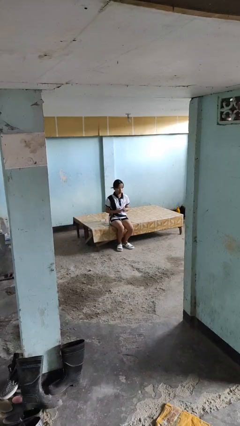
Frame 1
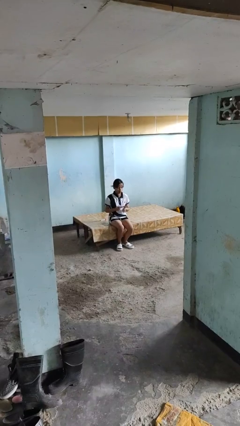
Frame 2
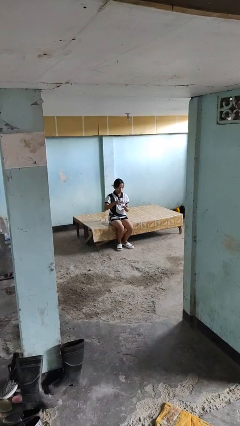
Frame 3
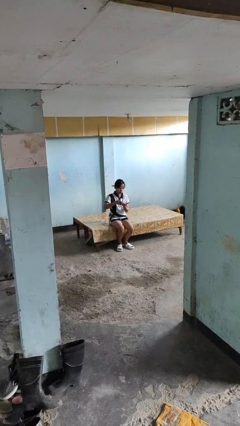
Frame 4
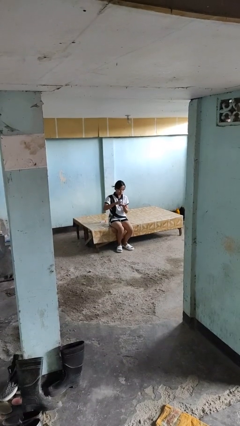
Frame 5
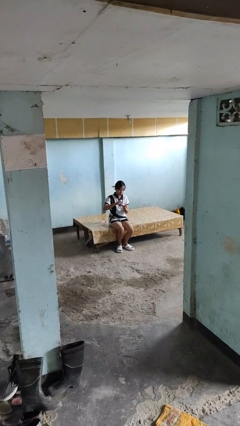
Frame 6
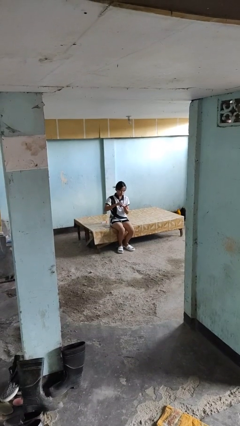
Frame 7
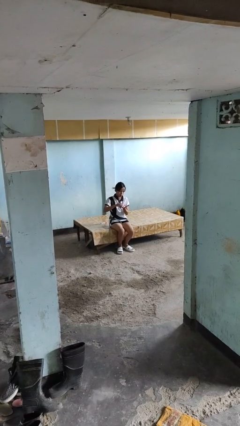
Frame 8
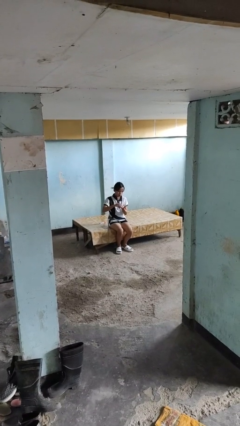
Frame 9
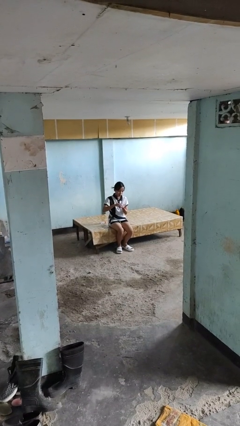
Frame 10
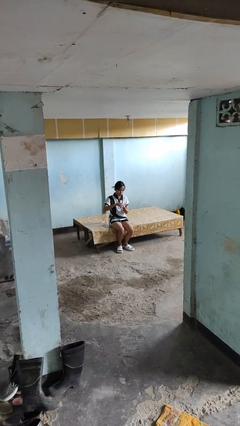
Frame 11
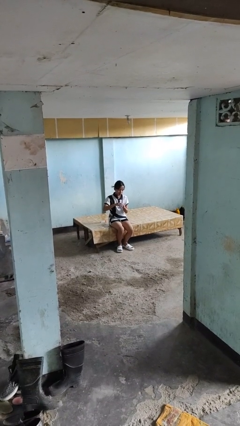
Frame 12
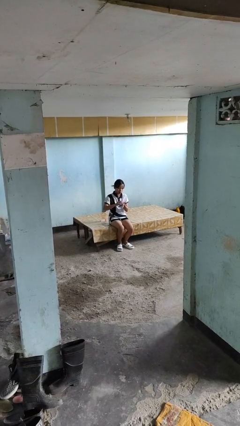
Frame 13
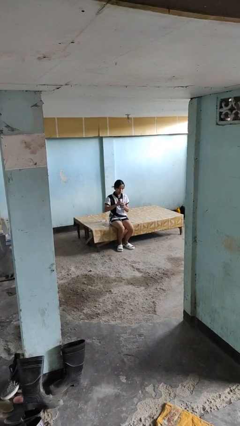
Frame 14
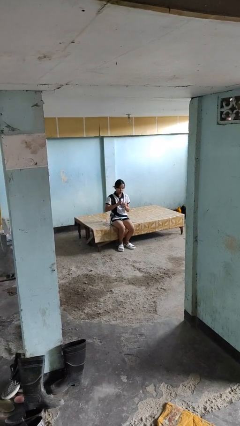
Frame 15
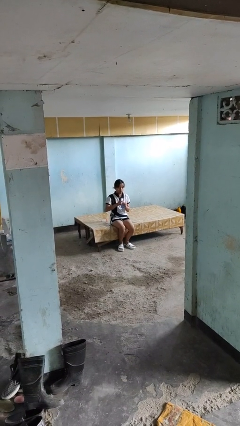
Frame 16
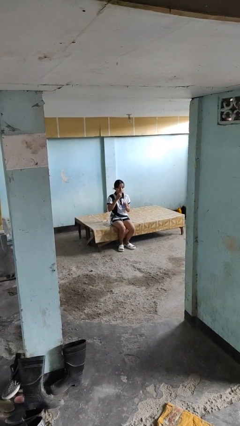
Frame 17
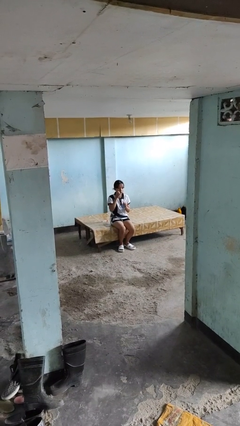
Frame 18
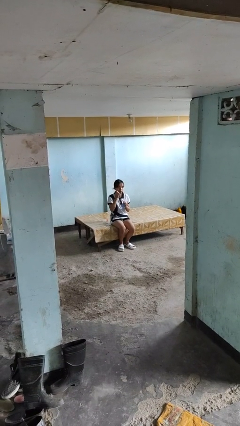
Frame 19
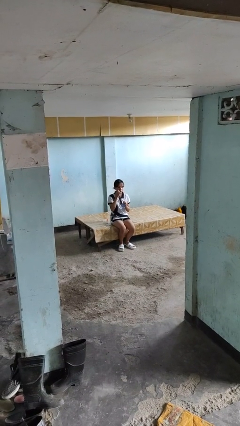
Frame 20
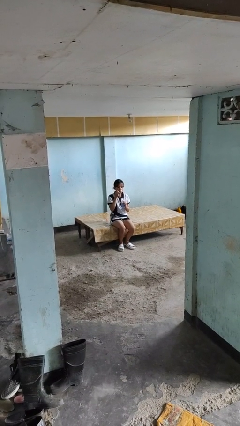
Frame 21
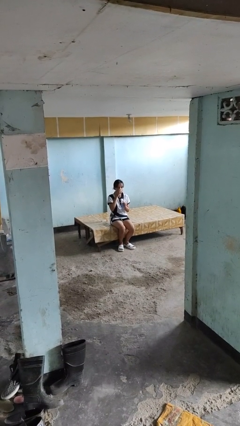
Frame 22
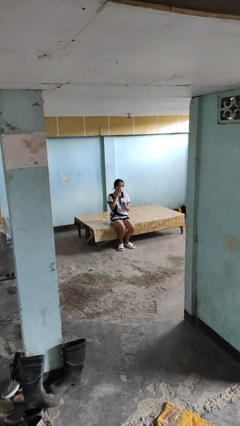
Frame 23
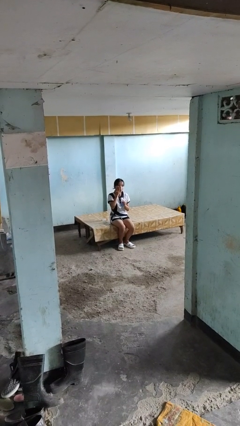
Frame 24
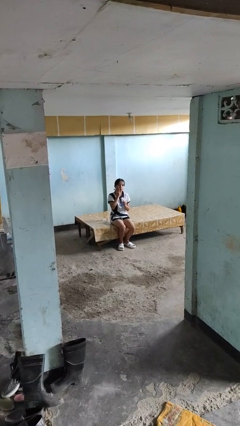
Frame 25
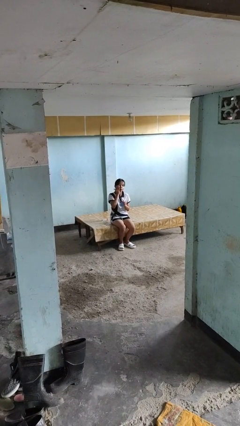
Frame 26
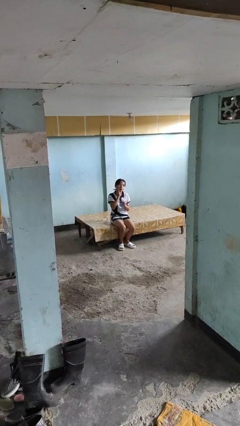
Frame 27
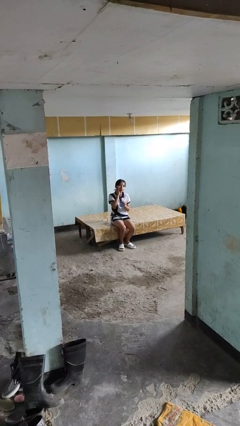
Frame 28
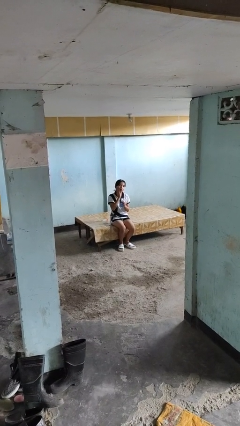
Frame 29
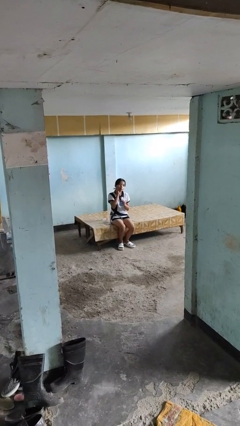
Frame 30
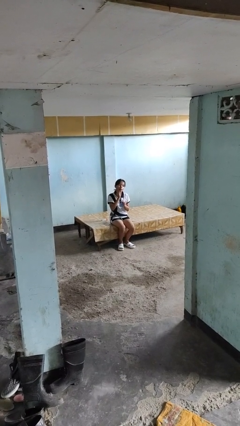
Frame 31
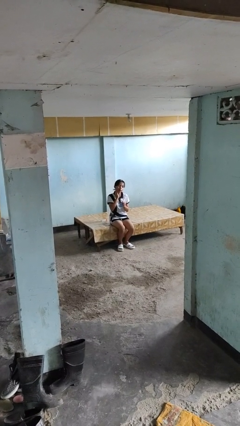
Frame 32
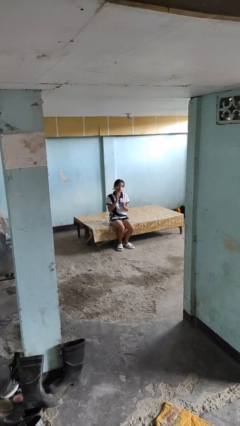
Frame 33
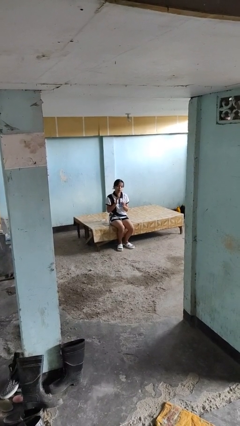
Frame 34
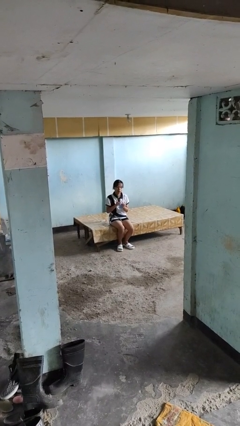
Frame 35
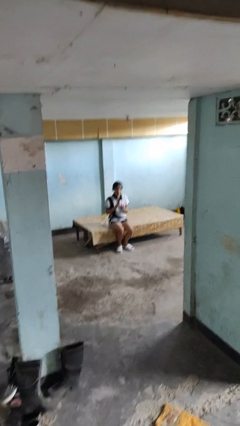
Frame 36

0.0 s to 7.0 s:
person applies facial moisturizer

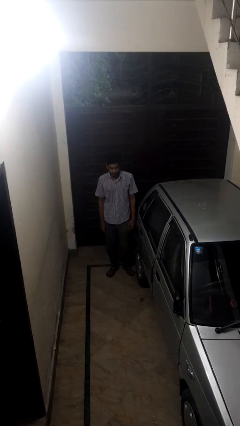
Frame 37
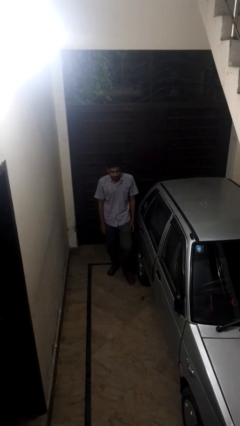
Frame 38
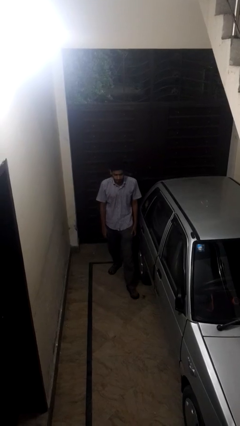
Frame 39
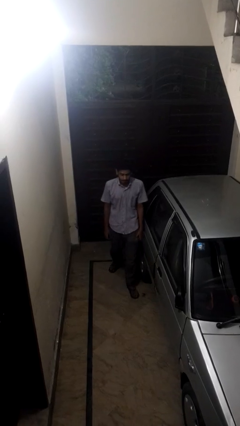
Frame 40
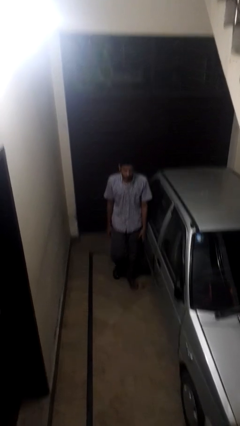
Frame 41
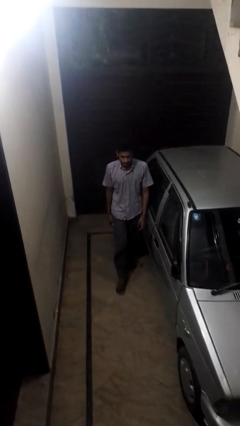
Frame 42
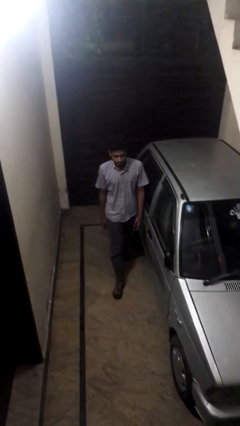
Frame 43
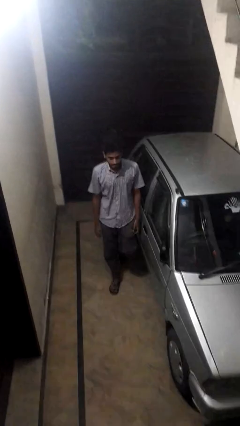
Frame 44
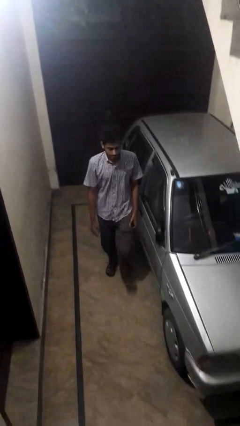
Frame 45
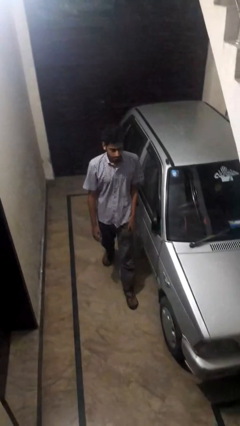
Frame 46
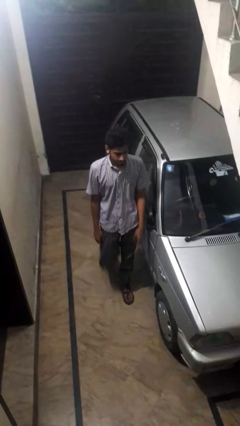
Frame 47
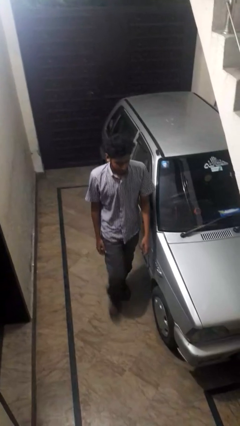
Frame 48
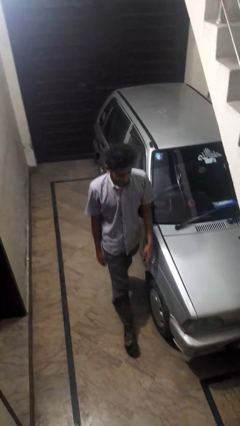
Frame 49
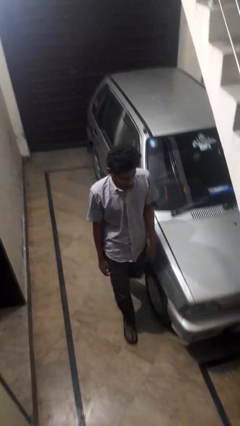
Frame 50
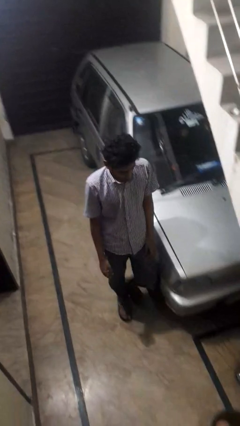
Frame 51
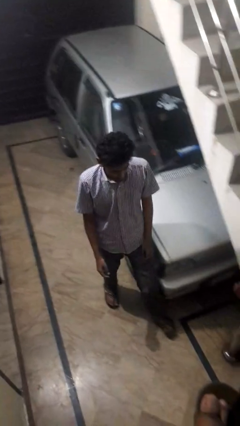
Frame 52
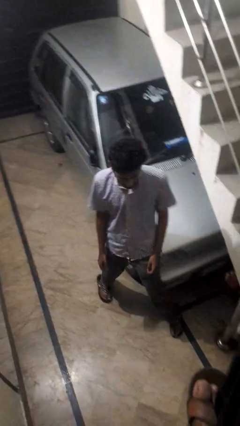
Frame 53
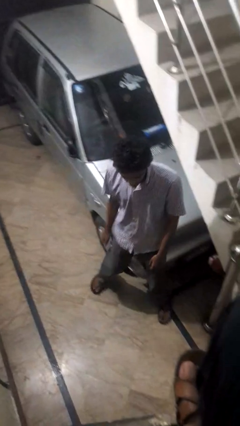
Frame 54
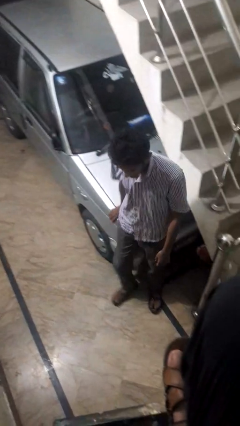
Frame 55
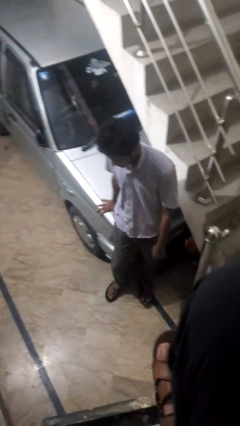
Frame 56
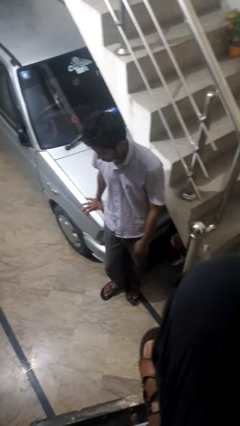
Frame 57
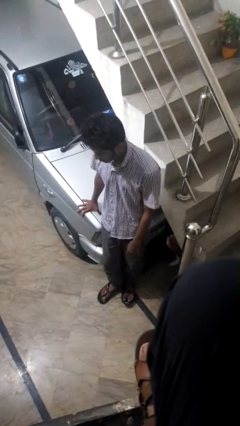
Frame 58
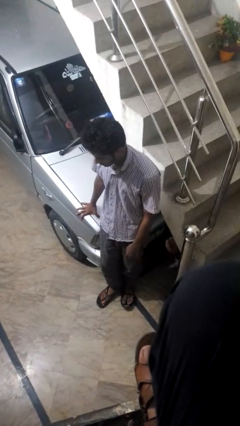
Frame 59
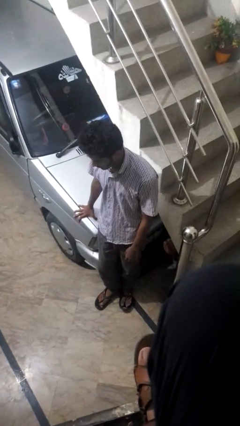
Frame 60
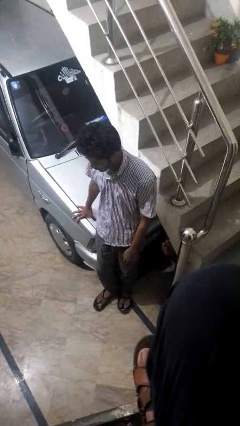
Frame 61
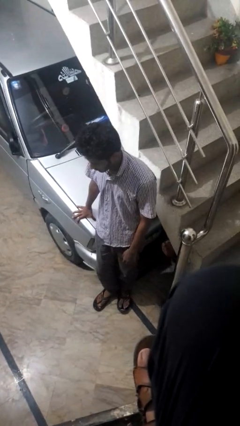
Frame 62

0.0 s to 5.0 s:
person walks around car

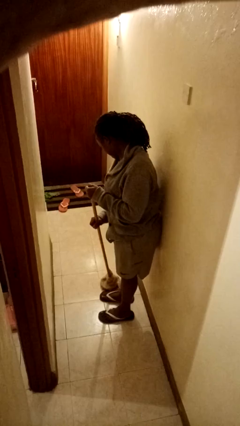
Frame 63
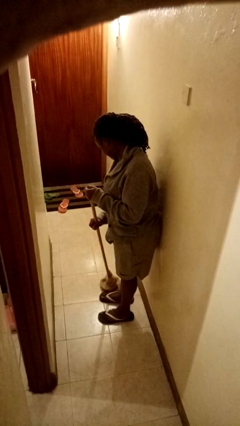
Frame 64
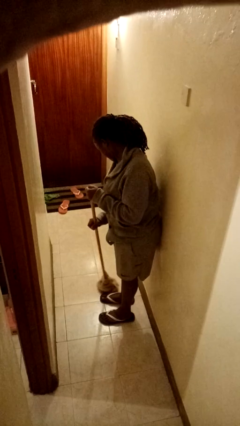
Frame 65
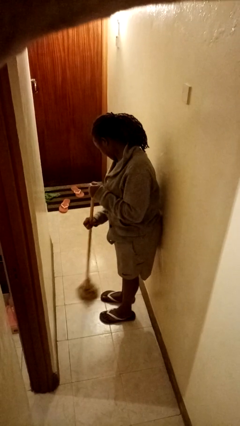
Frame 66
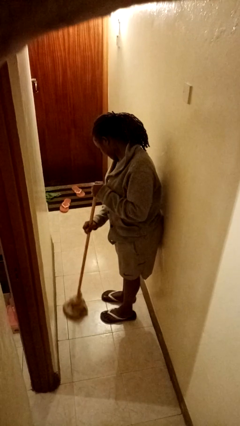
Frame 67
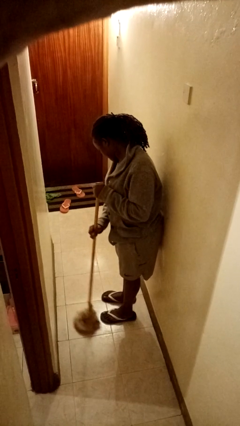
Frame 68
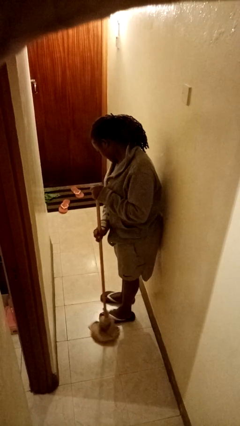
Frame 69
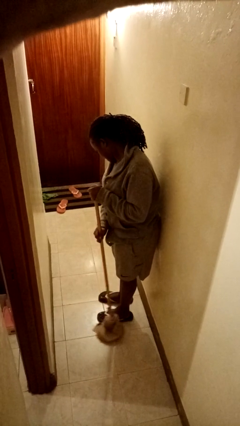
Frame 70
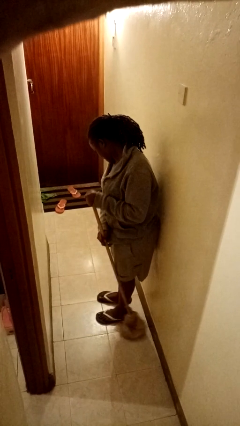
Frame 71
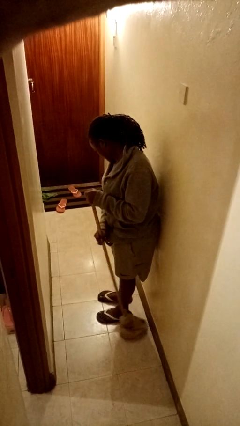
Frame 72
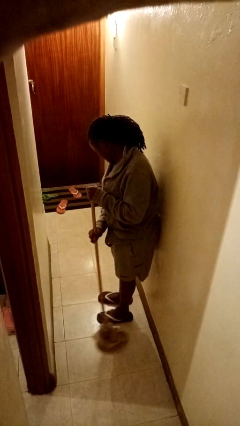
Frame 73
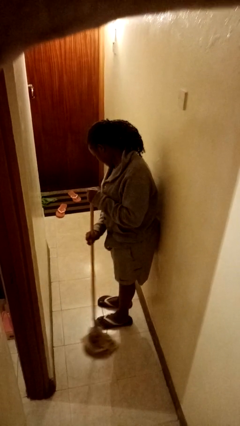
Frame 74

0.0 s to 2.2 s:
person mops

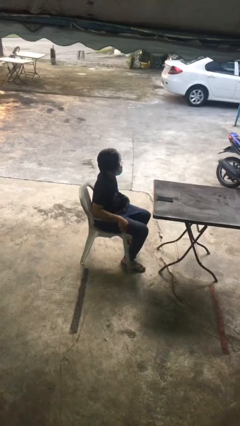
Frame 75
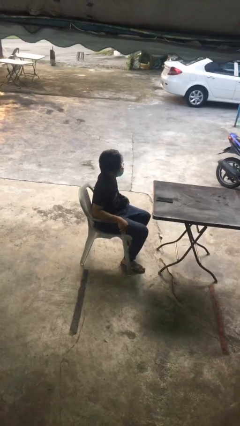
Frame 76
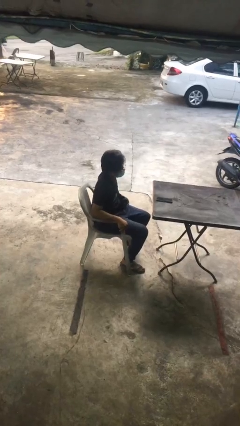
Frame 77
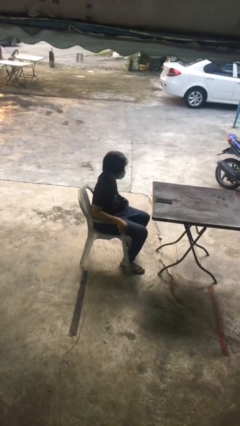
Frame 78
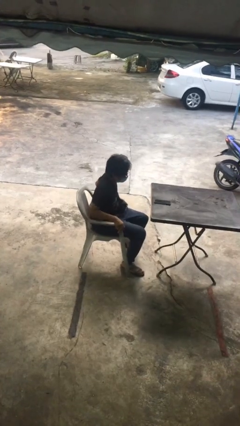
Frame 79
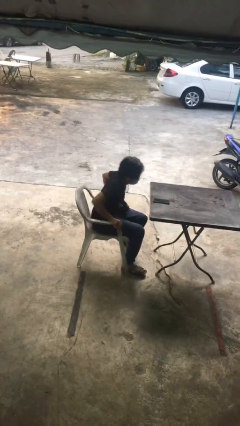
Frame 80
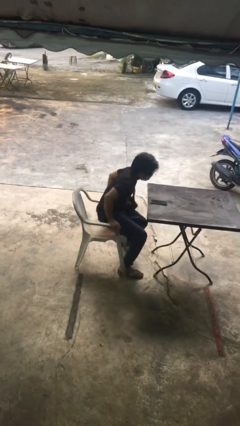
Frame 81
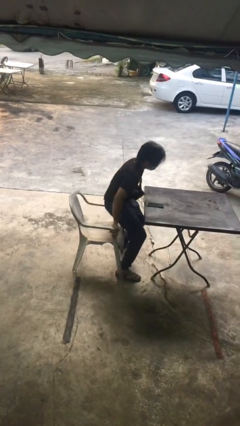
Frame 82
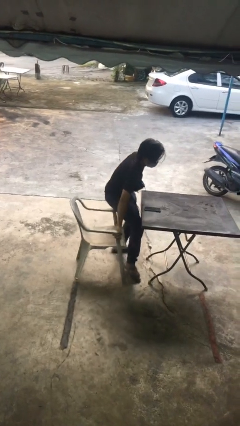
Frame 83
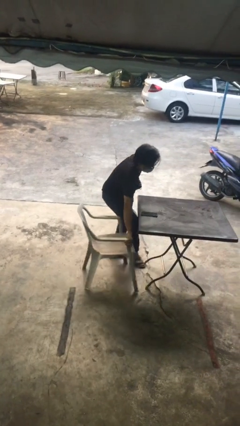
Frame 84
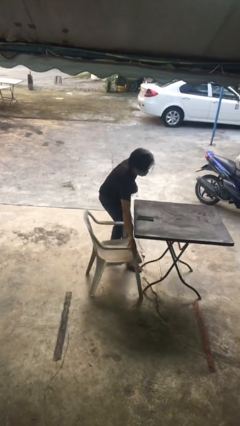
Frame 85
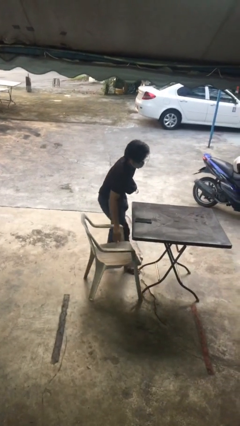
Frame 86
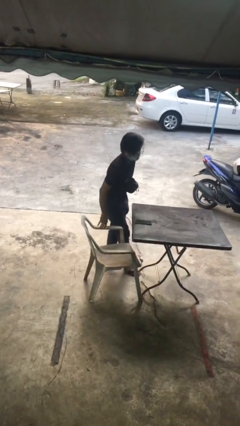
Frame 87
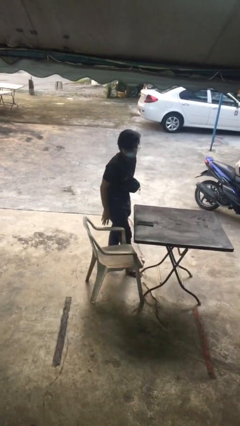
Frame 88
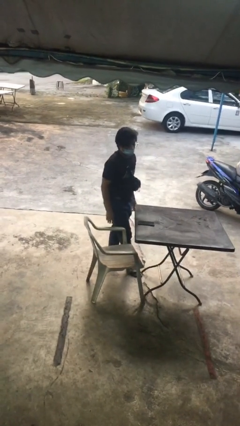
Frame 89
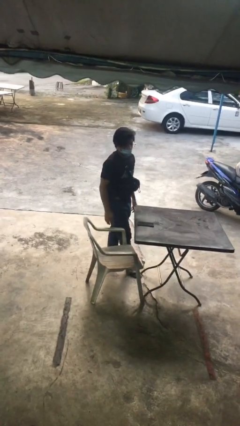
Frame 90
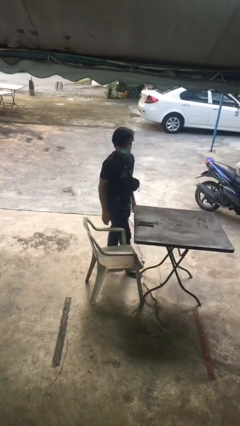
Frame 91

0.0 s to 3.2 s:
person stands up

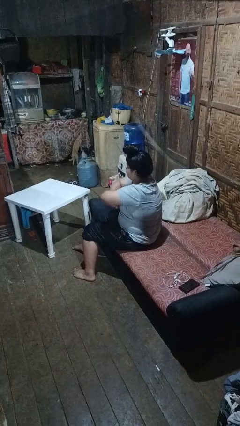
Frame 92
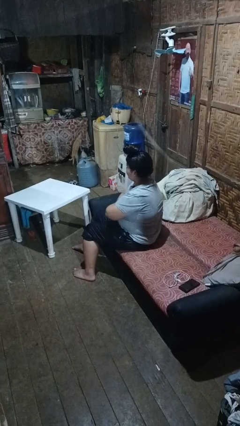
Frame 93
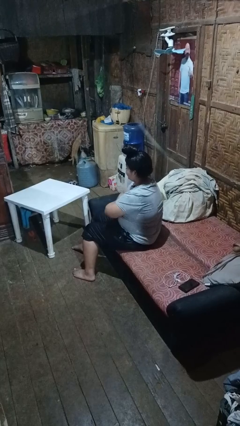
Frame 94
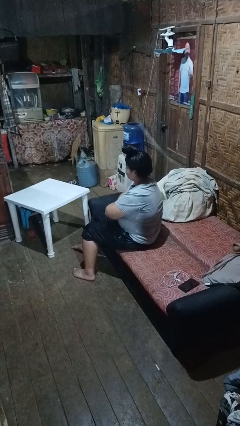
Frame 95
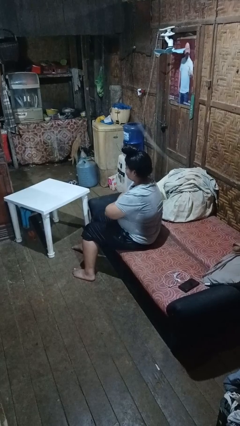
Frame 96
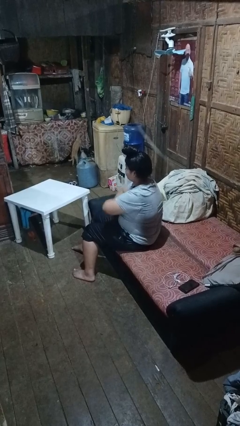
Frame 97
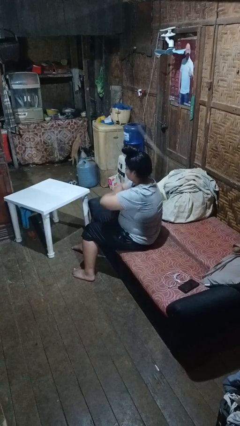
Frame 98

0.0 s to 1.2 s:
person crosses arms
